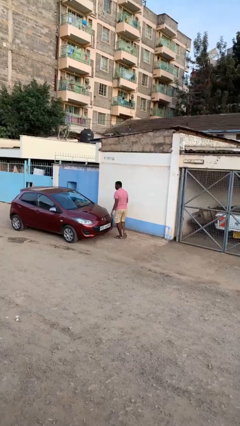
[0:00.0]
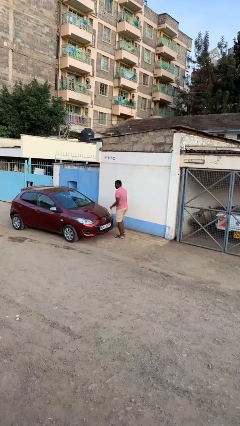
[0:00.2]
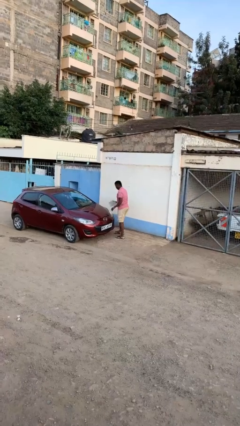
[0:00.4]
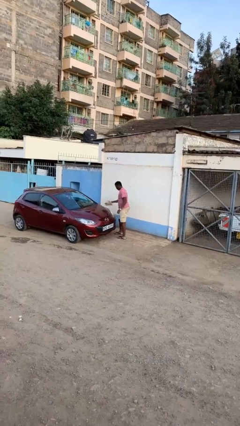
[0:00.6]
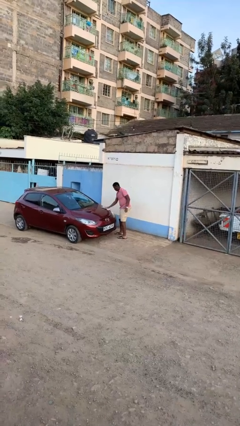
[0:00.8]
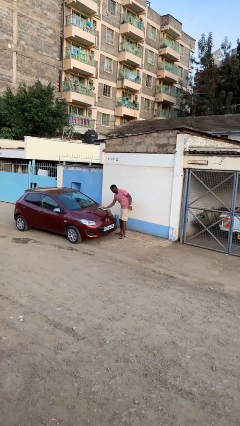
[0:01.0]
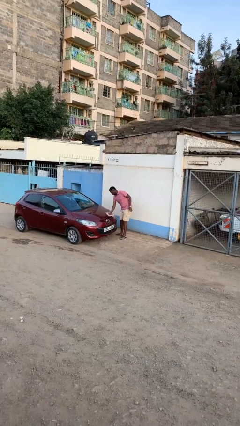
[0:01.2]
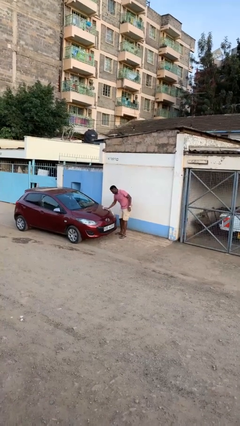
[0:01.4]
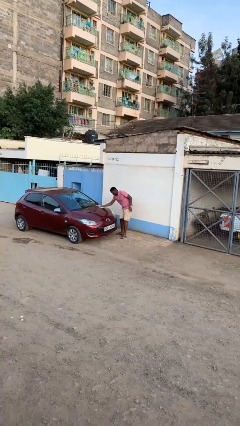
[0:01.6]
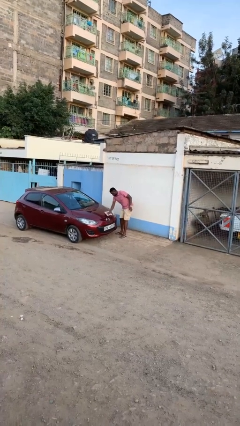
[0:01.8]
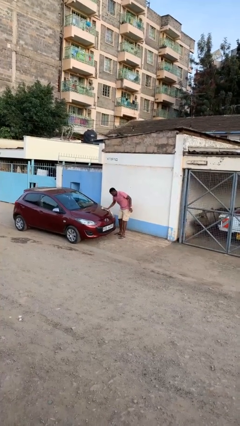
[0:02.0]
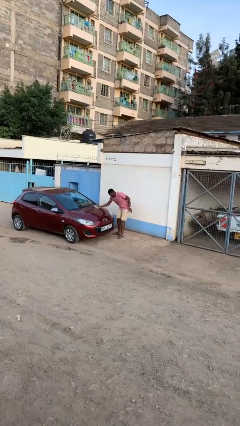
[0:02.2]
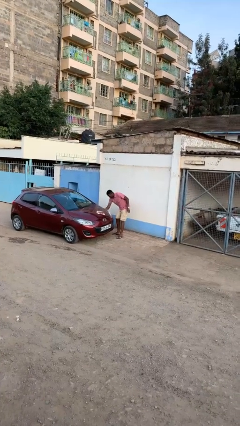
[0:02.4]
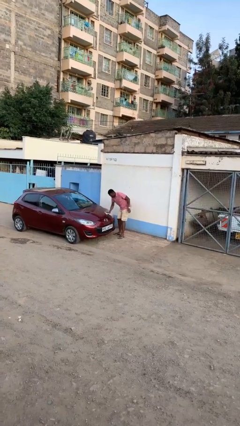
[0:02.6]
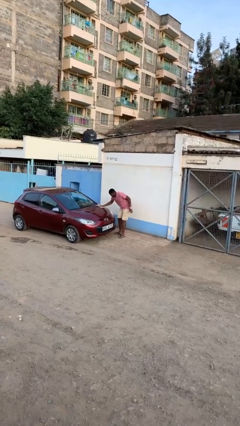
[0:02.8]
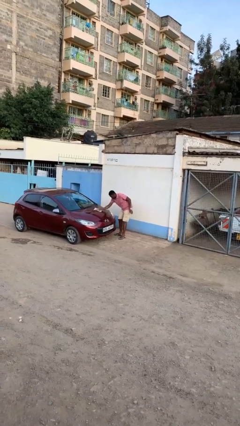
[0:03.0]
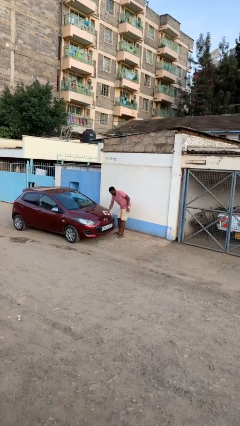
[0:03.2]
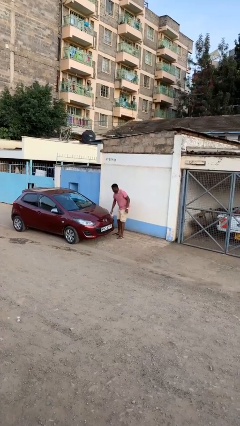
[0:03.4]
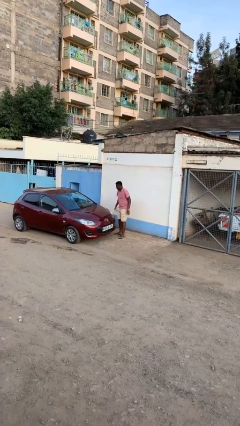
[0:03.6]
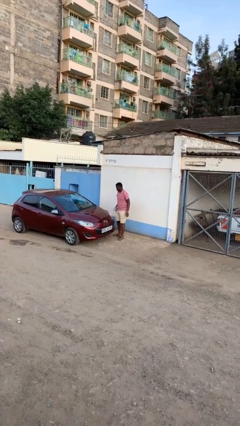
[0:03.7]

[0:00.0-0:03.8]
person polishes car with rag

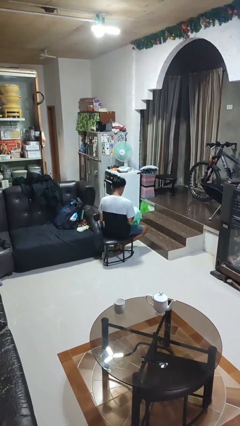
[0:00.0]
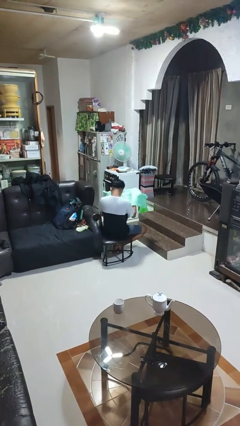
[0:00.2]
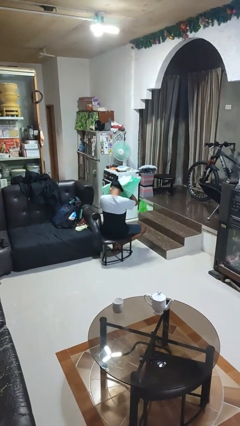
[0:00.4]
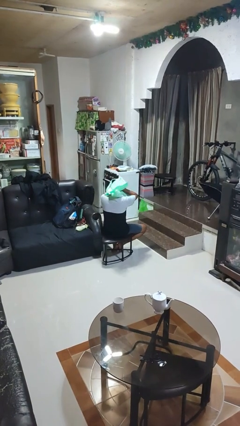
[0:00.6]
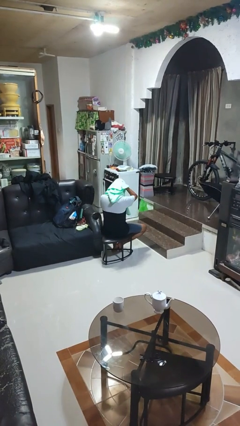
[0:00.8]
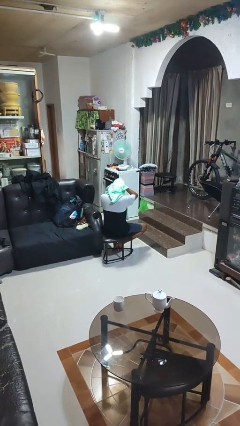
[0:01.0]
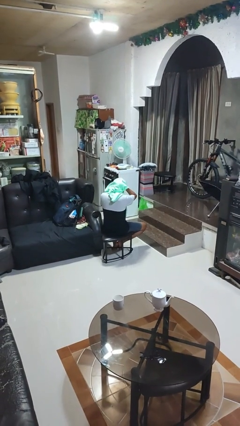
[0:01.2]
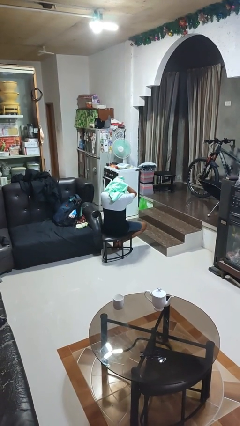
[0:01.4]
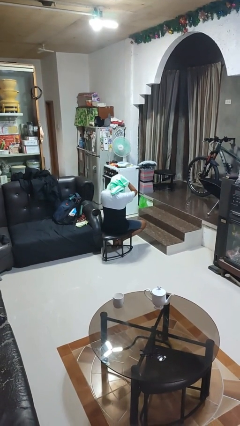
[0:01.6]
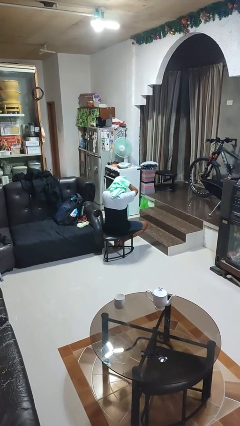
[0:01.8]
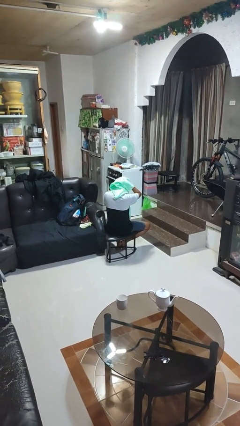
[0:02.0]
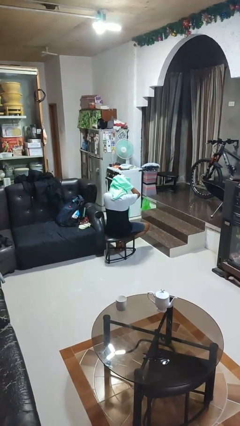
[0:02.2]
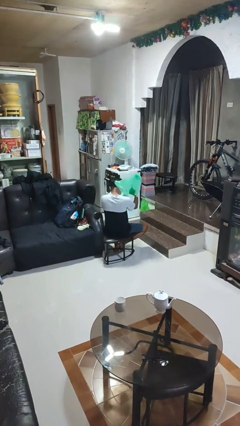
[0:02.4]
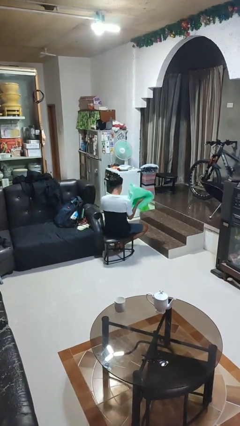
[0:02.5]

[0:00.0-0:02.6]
person dries hair with hairdryer

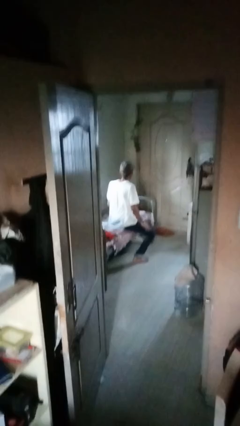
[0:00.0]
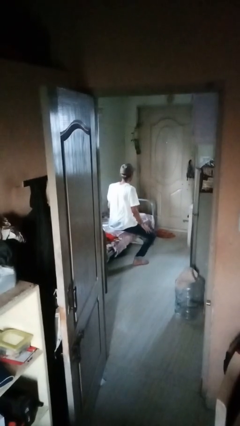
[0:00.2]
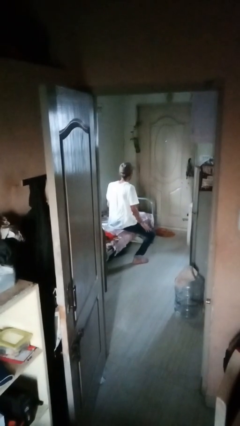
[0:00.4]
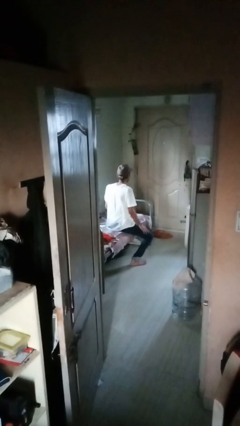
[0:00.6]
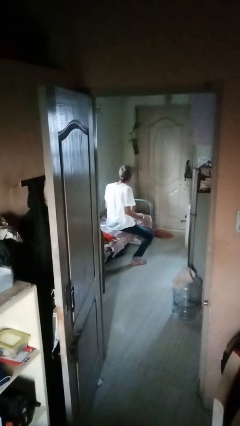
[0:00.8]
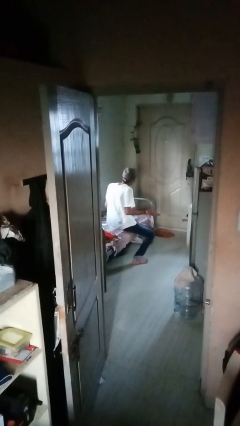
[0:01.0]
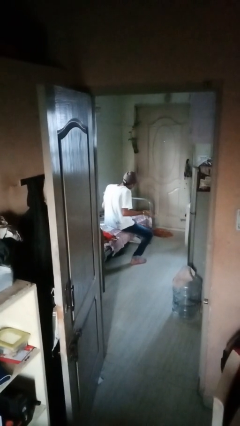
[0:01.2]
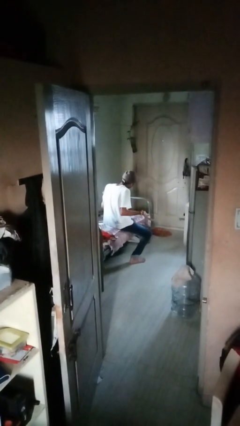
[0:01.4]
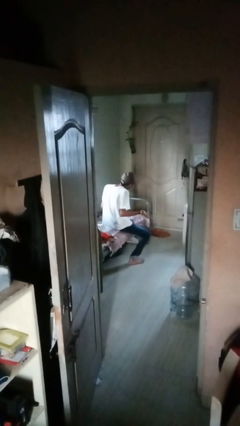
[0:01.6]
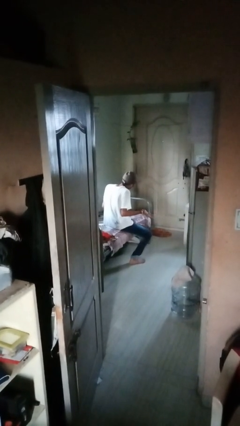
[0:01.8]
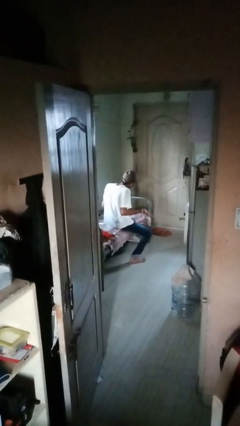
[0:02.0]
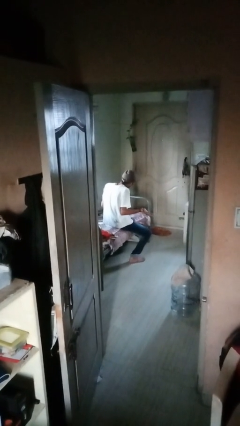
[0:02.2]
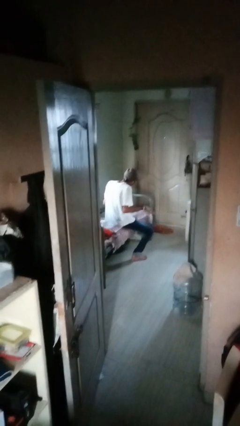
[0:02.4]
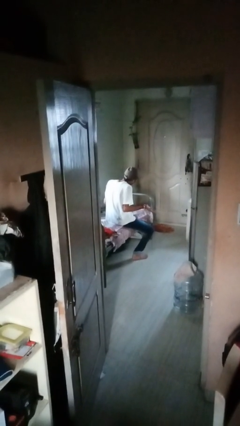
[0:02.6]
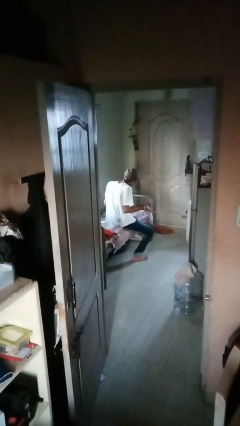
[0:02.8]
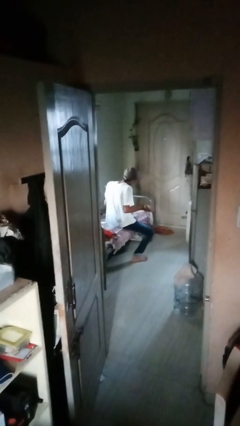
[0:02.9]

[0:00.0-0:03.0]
person shrugs

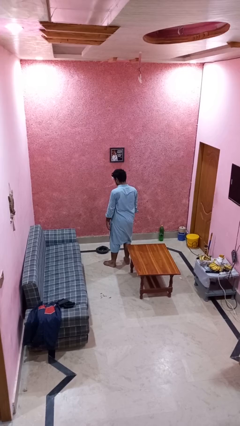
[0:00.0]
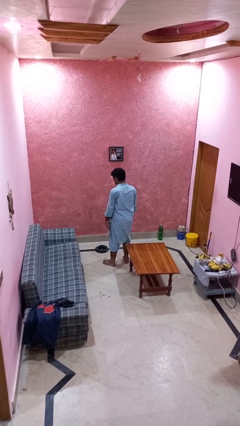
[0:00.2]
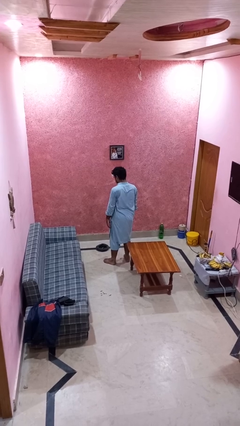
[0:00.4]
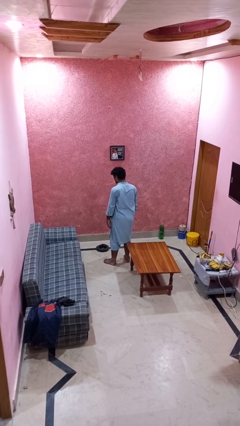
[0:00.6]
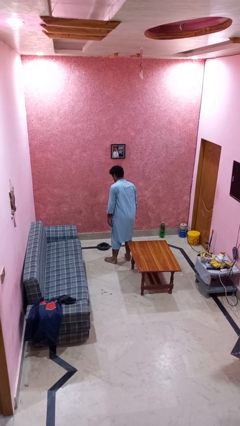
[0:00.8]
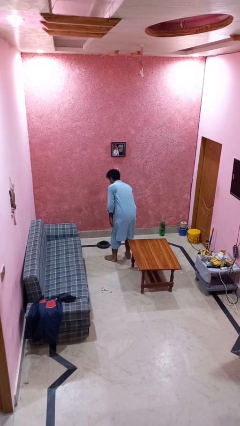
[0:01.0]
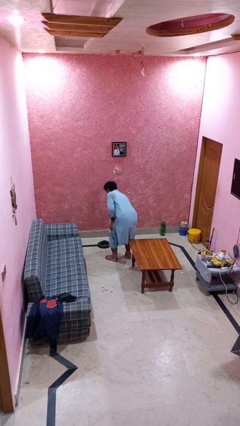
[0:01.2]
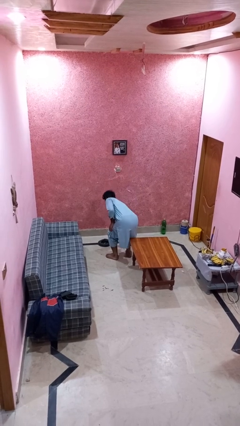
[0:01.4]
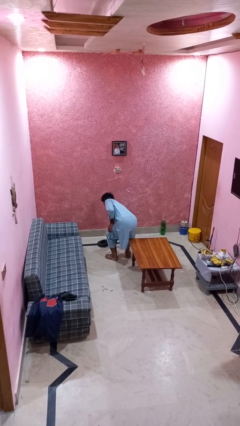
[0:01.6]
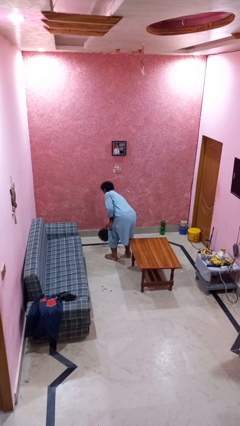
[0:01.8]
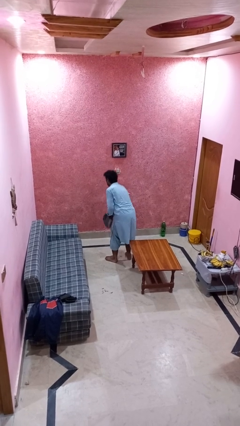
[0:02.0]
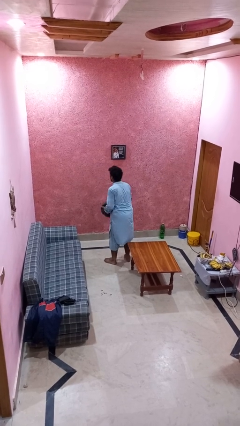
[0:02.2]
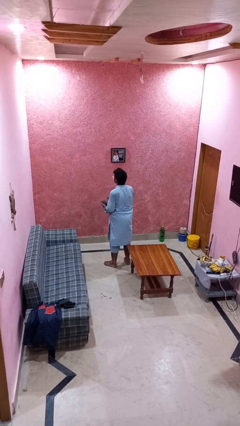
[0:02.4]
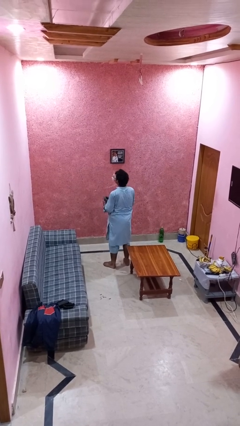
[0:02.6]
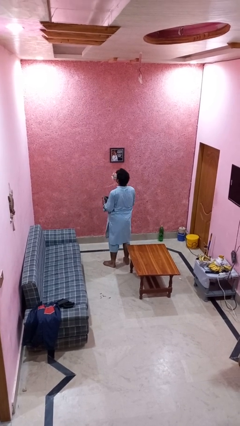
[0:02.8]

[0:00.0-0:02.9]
person picks up object from floor

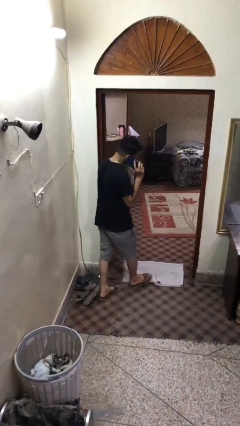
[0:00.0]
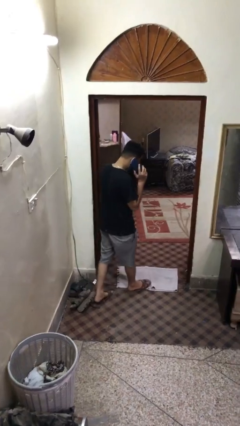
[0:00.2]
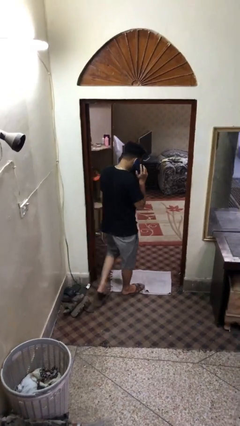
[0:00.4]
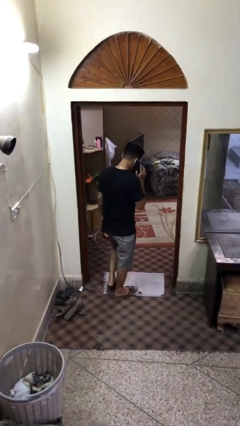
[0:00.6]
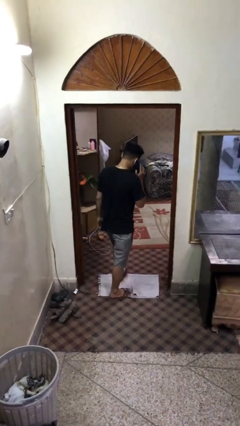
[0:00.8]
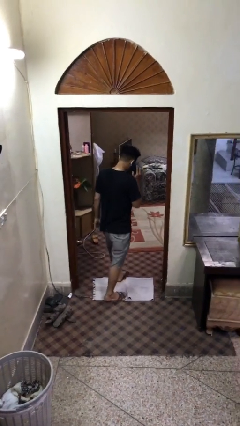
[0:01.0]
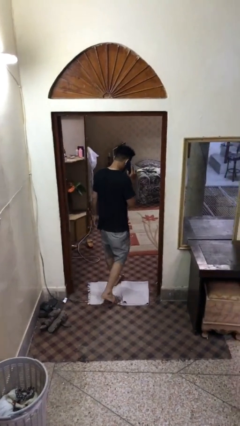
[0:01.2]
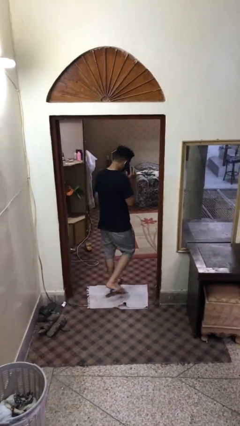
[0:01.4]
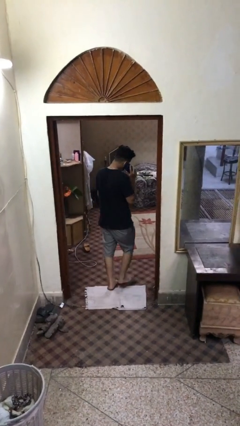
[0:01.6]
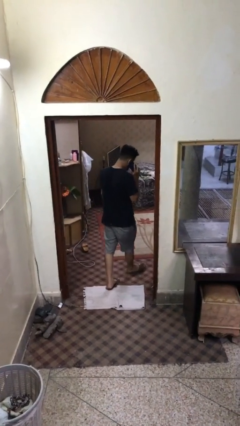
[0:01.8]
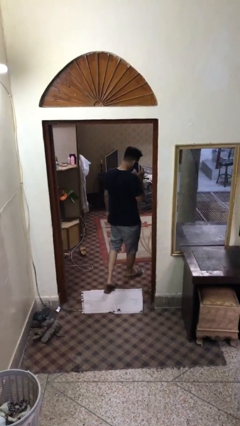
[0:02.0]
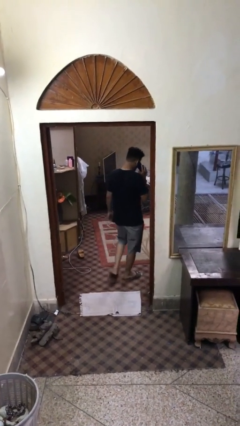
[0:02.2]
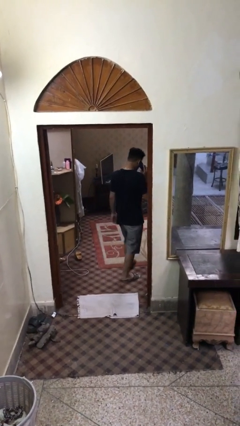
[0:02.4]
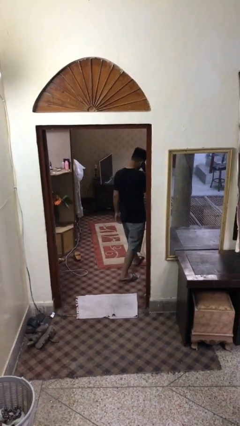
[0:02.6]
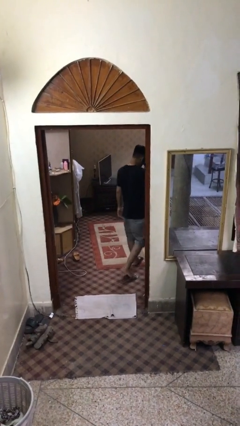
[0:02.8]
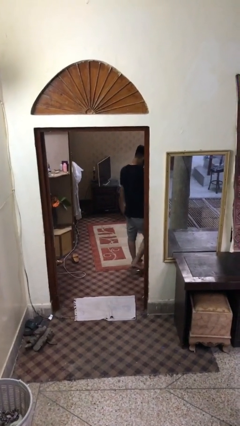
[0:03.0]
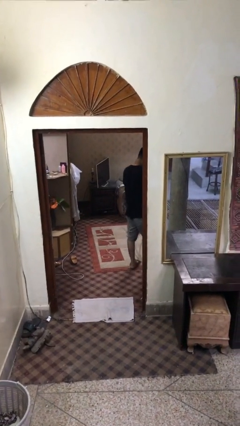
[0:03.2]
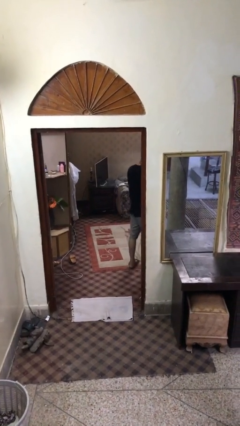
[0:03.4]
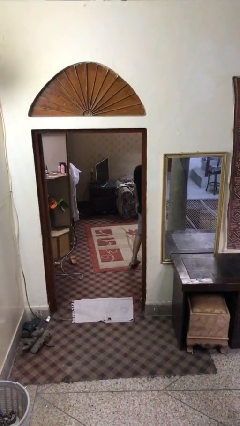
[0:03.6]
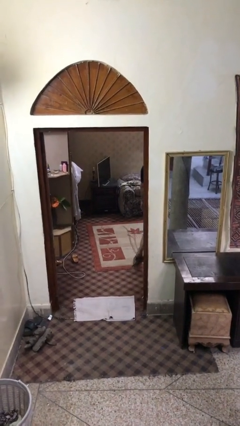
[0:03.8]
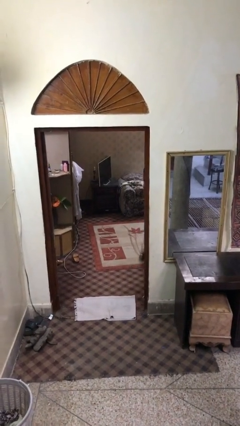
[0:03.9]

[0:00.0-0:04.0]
person exits scene through structure

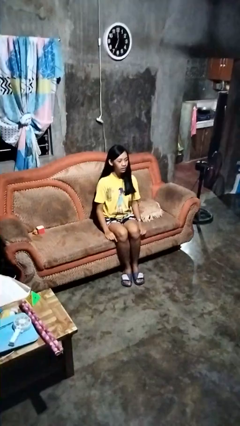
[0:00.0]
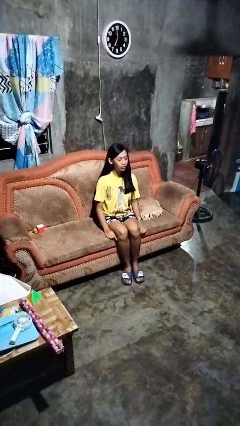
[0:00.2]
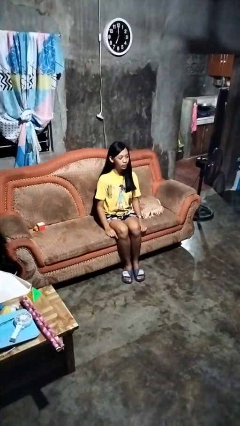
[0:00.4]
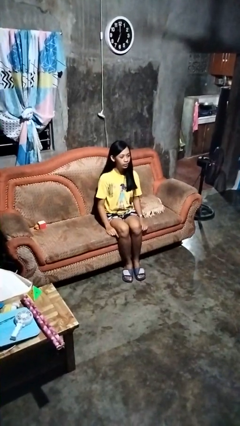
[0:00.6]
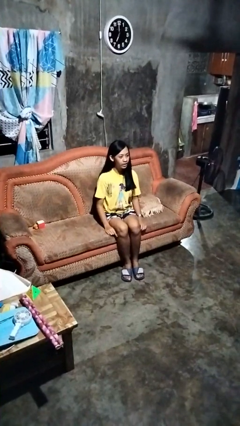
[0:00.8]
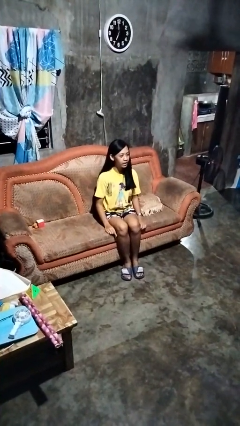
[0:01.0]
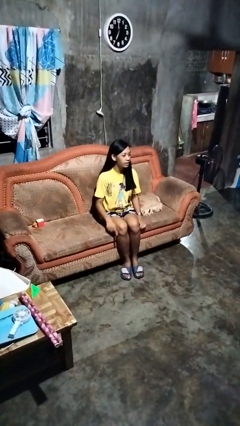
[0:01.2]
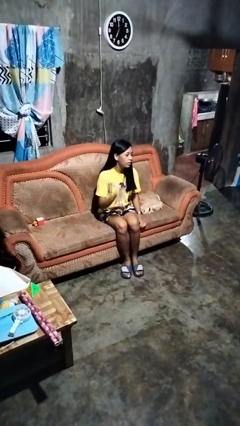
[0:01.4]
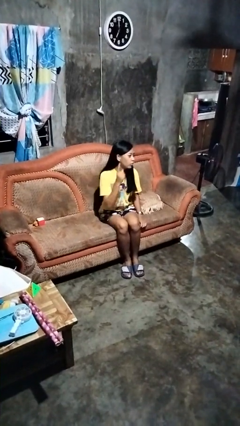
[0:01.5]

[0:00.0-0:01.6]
person gestures listen closely
